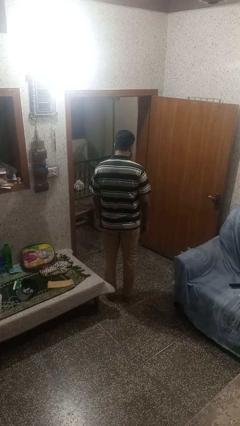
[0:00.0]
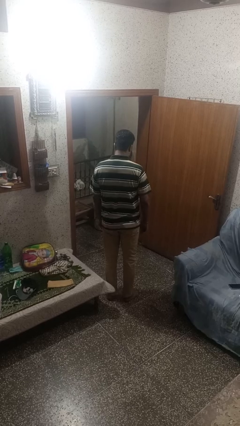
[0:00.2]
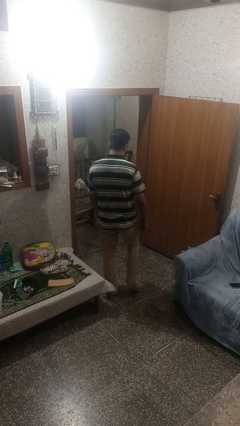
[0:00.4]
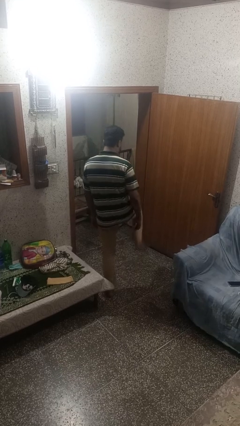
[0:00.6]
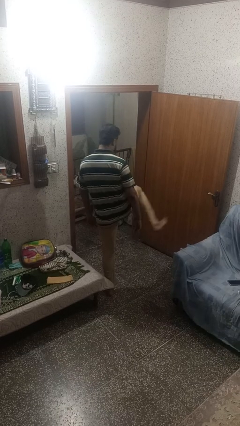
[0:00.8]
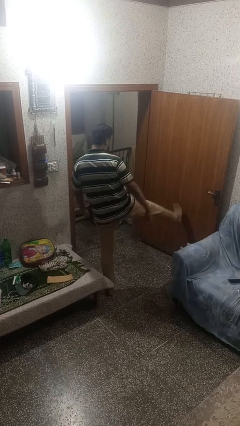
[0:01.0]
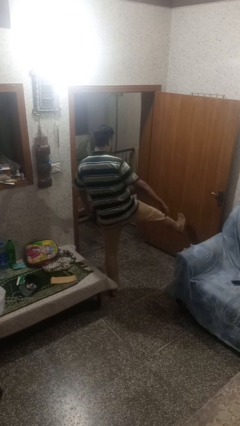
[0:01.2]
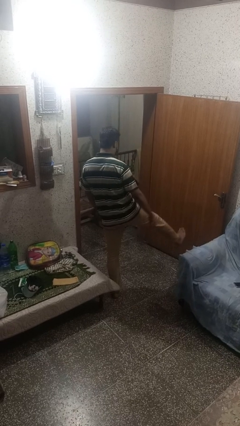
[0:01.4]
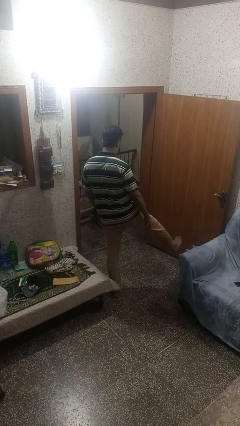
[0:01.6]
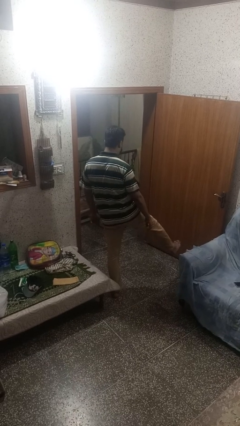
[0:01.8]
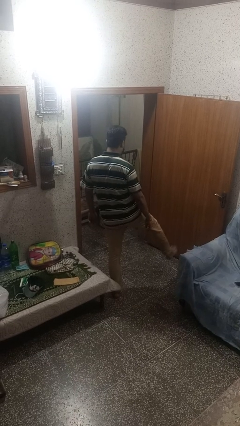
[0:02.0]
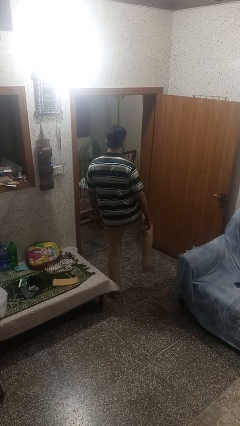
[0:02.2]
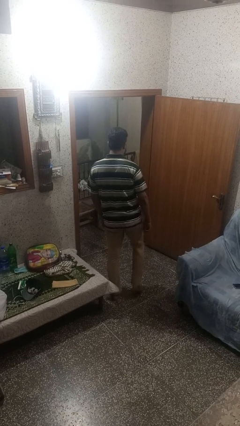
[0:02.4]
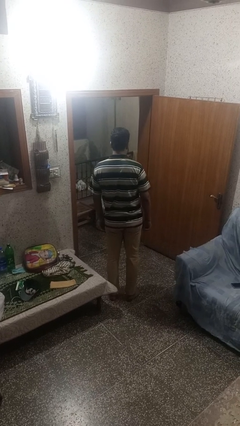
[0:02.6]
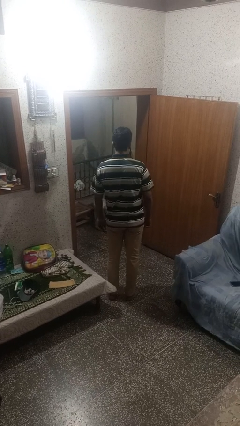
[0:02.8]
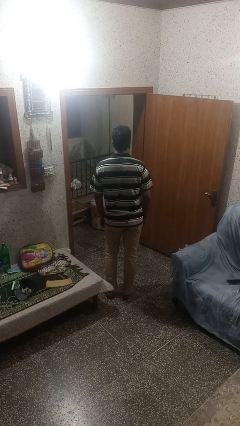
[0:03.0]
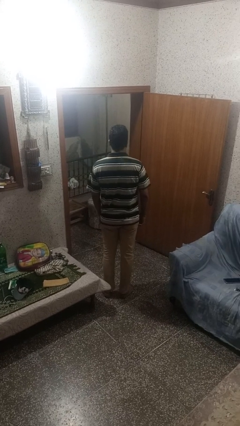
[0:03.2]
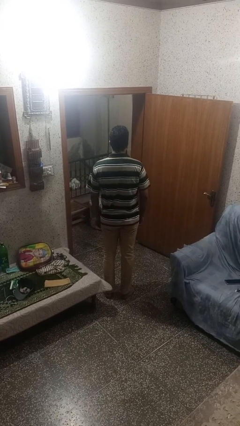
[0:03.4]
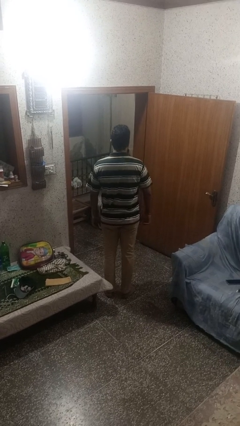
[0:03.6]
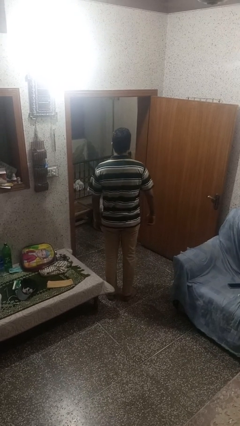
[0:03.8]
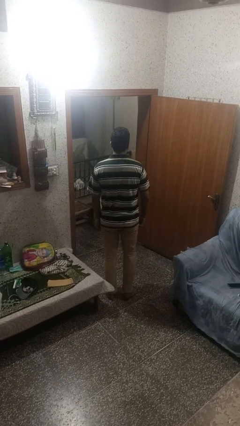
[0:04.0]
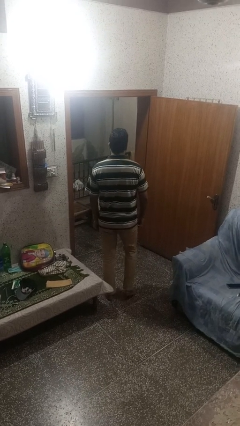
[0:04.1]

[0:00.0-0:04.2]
person karate kicks

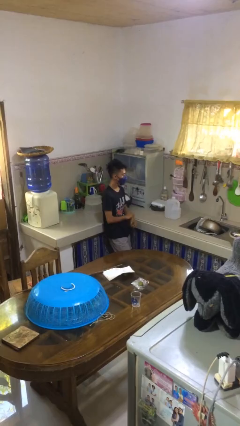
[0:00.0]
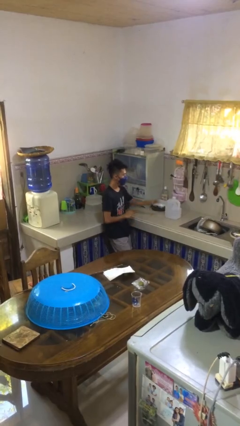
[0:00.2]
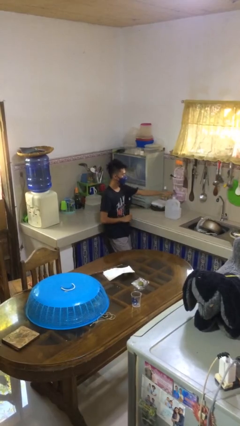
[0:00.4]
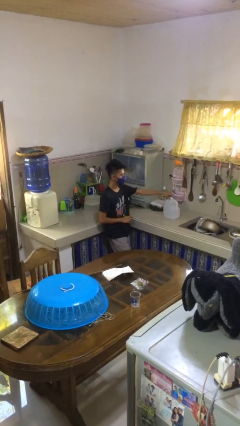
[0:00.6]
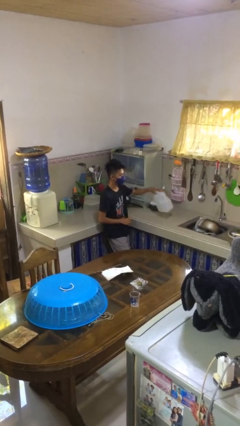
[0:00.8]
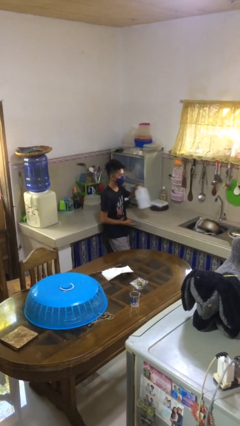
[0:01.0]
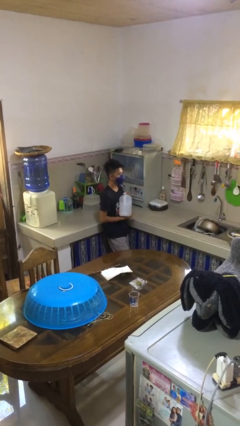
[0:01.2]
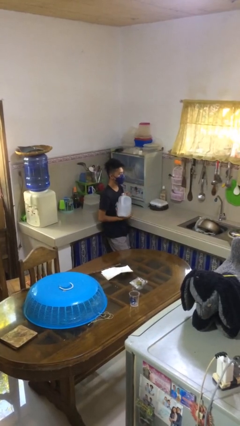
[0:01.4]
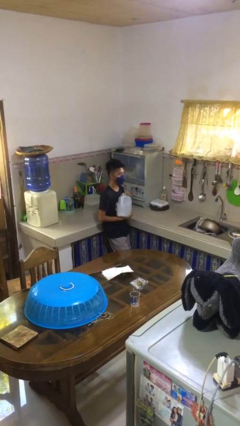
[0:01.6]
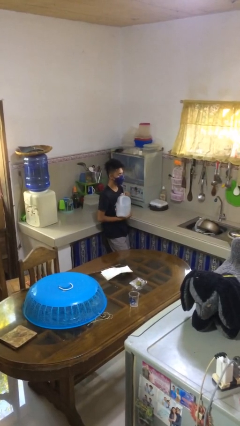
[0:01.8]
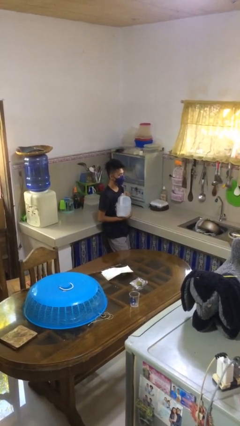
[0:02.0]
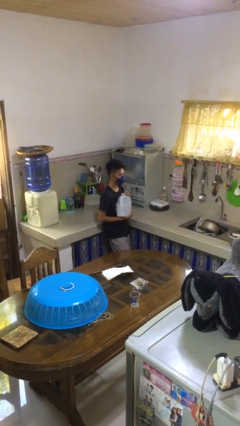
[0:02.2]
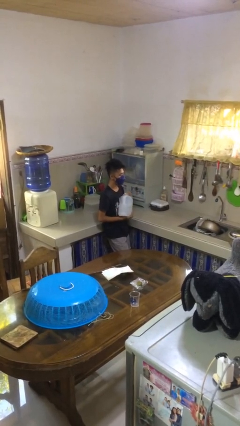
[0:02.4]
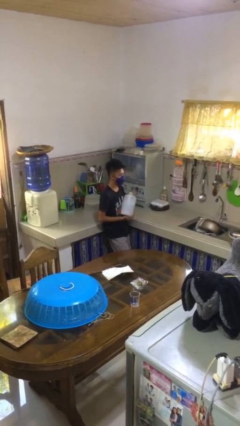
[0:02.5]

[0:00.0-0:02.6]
person picks up object from countertop

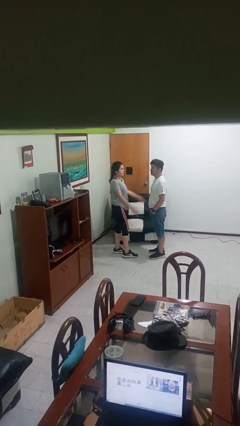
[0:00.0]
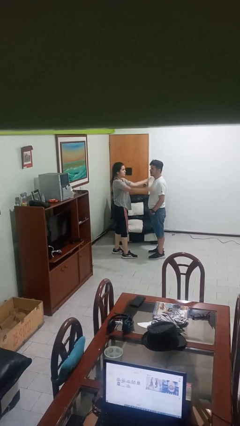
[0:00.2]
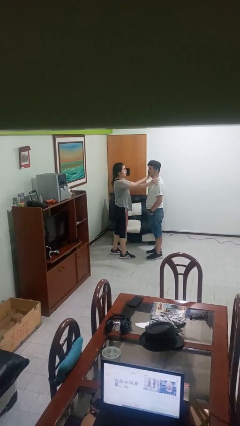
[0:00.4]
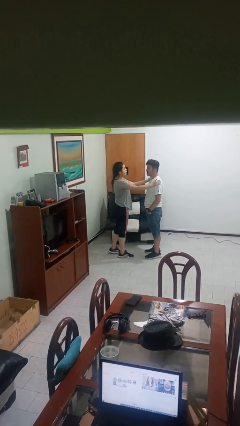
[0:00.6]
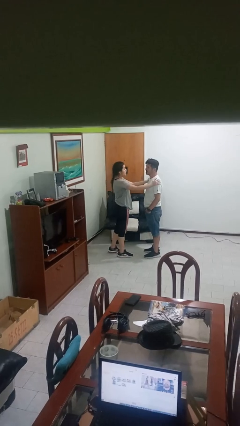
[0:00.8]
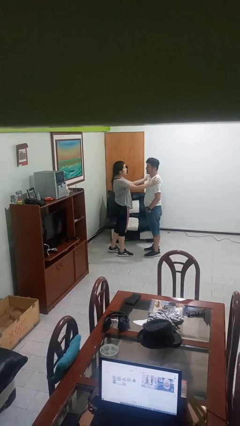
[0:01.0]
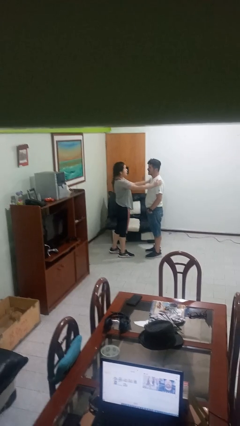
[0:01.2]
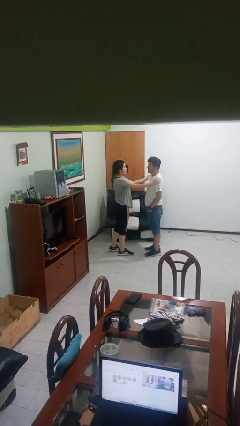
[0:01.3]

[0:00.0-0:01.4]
person pounds shoulders of person

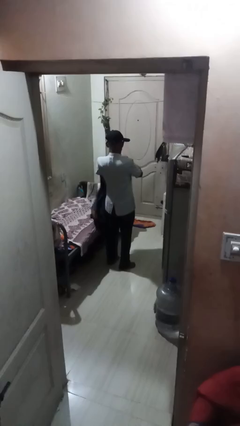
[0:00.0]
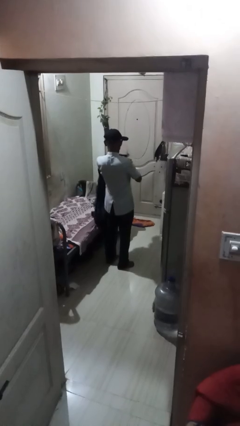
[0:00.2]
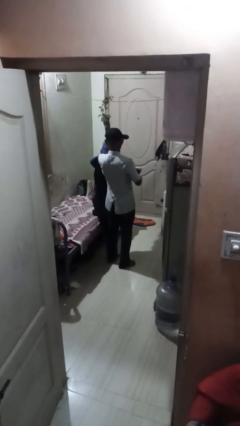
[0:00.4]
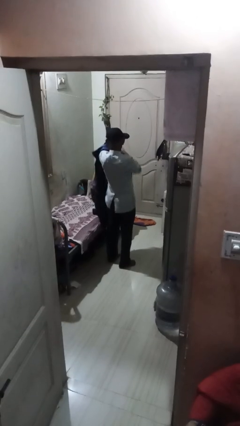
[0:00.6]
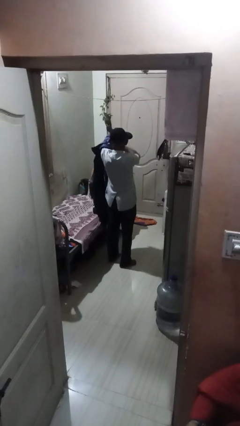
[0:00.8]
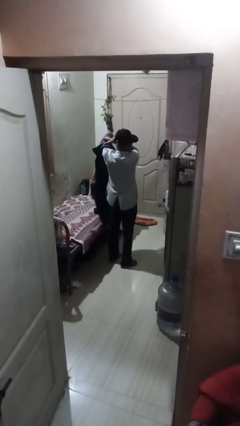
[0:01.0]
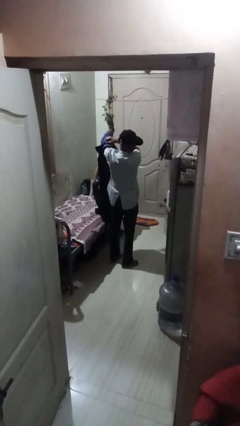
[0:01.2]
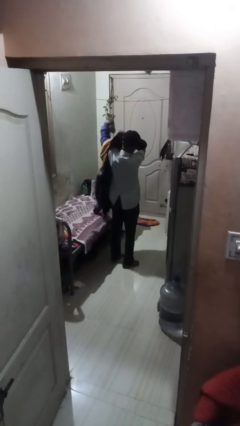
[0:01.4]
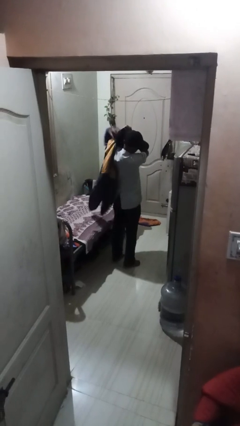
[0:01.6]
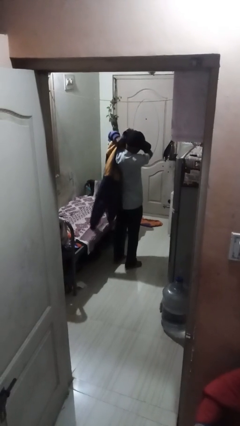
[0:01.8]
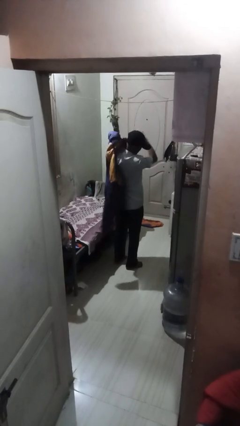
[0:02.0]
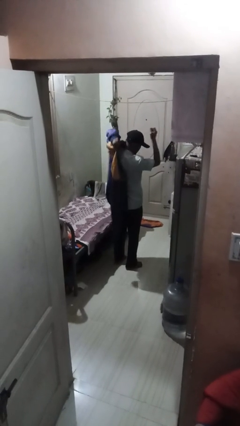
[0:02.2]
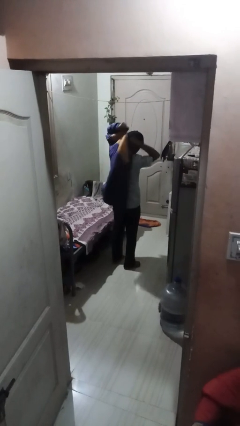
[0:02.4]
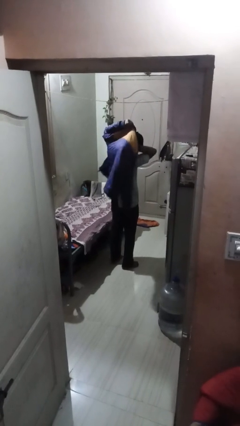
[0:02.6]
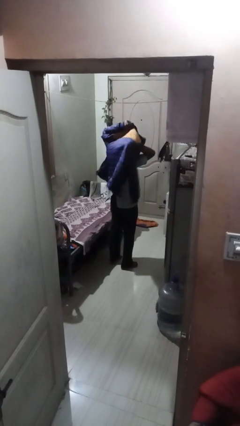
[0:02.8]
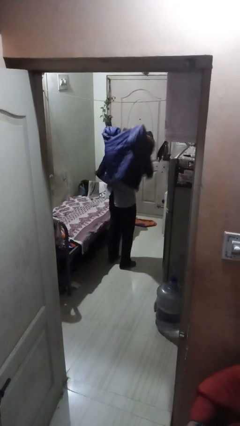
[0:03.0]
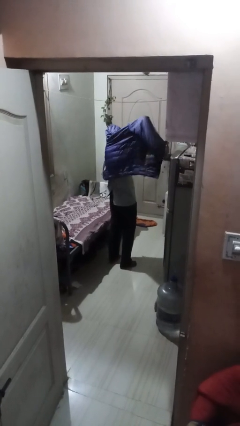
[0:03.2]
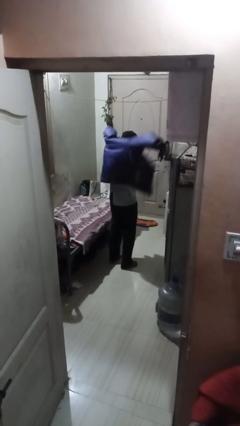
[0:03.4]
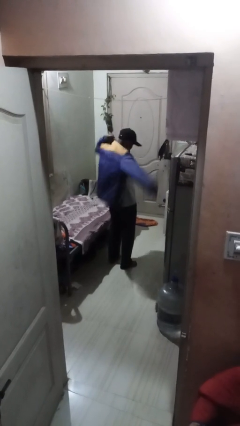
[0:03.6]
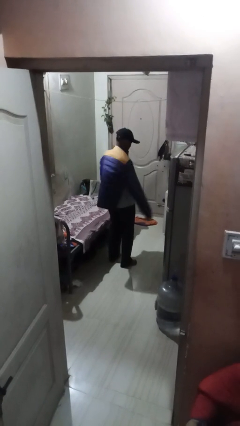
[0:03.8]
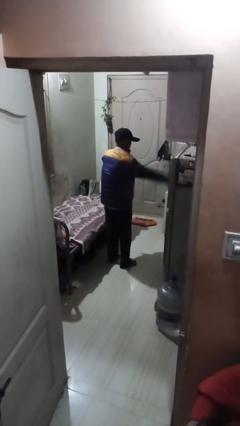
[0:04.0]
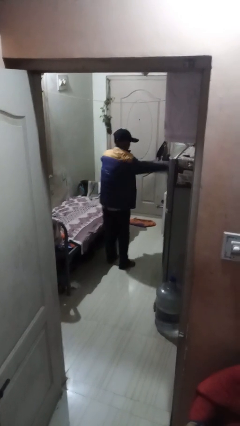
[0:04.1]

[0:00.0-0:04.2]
person puts on jacket

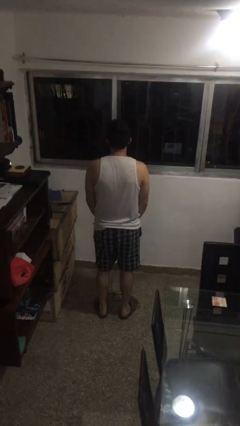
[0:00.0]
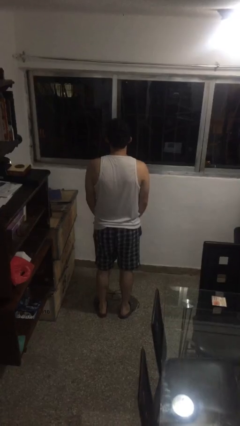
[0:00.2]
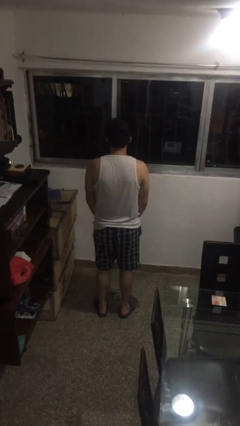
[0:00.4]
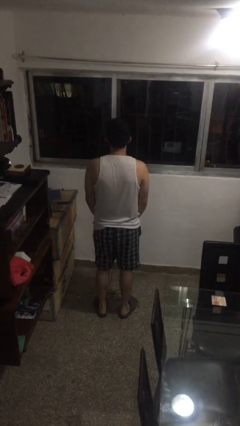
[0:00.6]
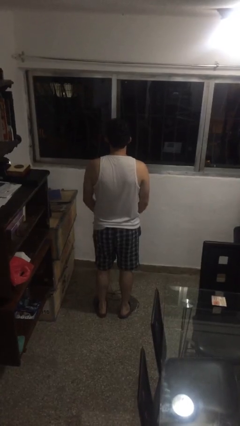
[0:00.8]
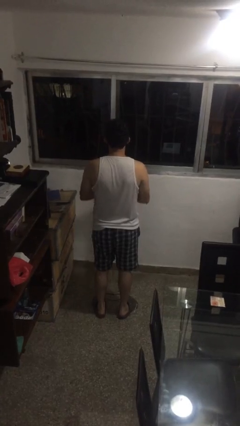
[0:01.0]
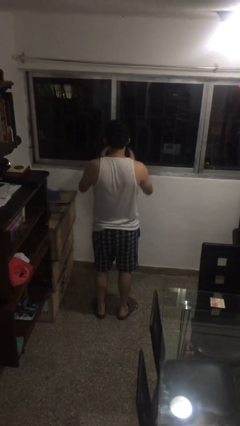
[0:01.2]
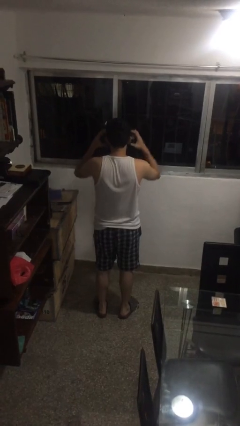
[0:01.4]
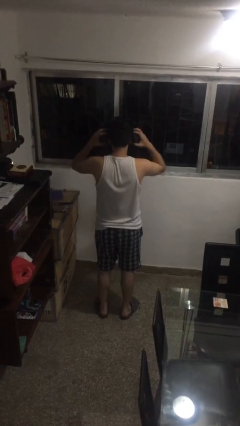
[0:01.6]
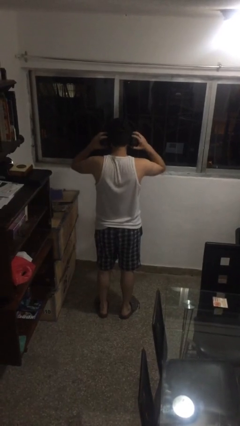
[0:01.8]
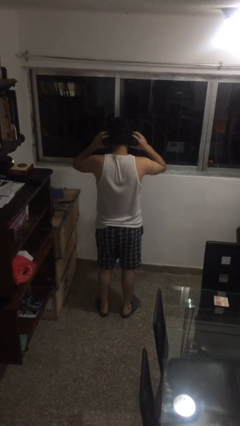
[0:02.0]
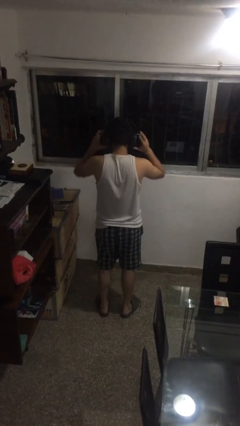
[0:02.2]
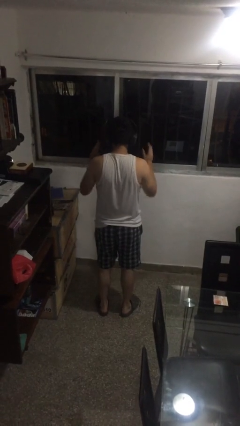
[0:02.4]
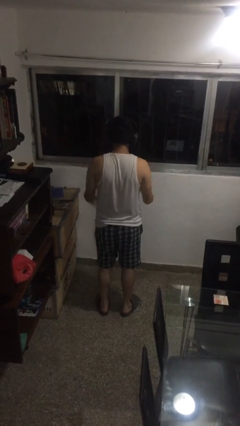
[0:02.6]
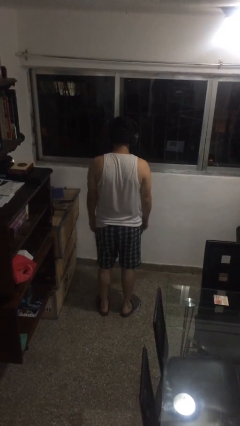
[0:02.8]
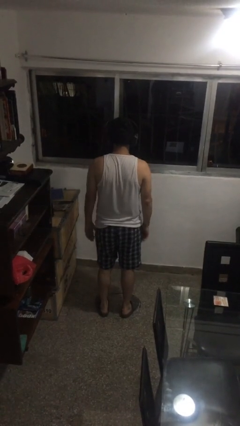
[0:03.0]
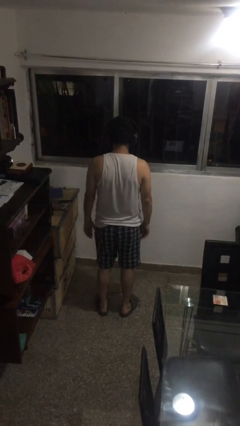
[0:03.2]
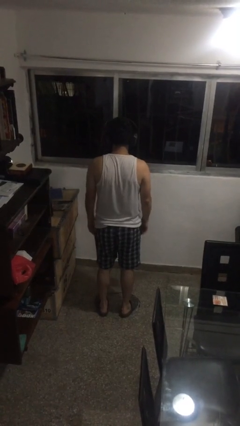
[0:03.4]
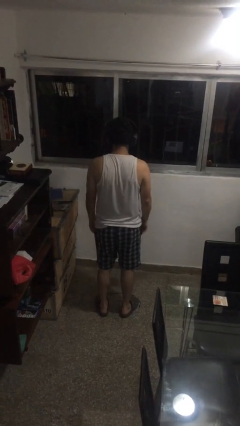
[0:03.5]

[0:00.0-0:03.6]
person puts on headphones

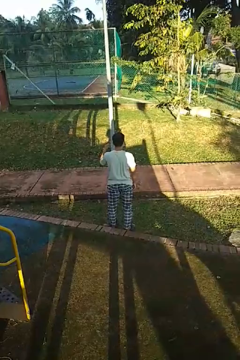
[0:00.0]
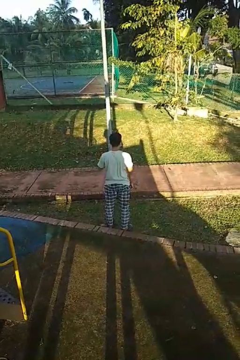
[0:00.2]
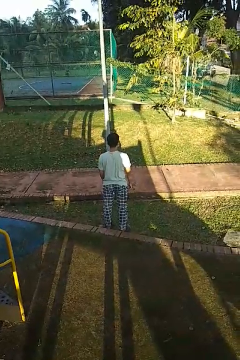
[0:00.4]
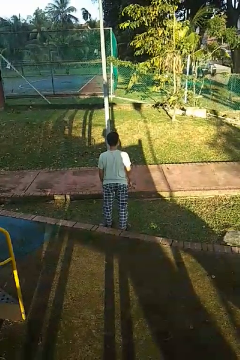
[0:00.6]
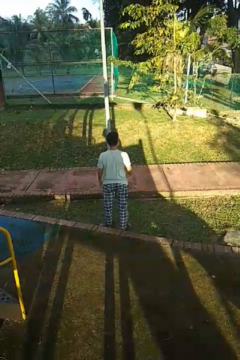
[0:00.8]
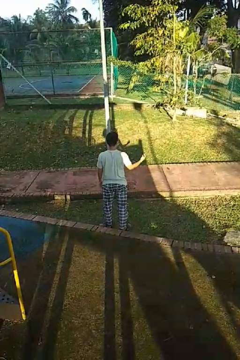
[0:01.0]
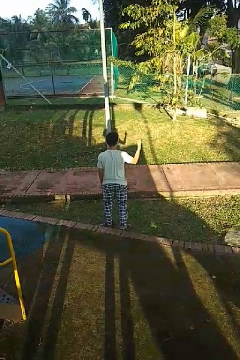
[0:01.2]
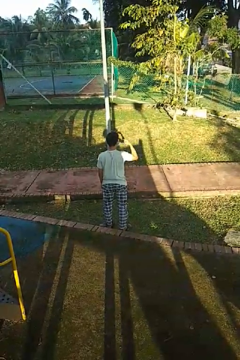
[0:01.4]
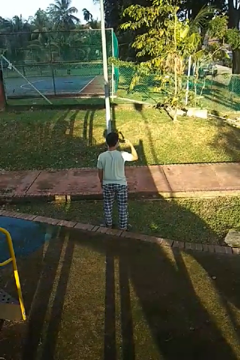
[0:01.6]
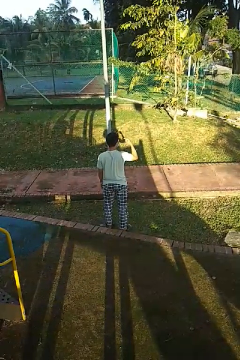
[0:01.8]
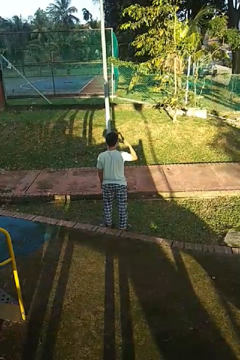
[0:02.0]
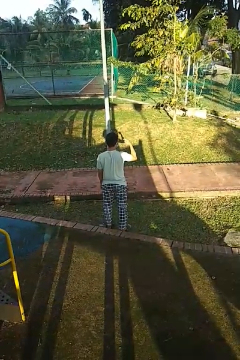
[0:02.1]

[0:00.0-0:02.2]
person gestures listen closely
